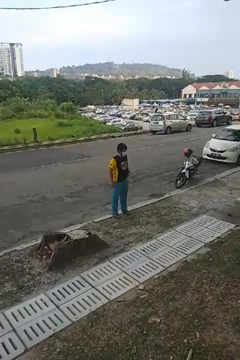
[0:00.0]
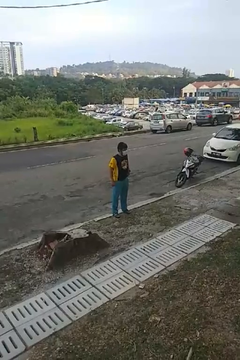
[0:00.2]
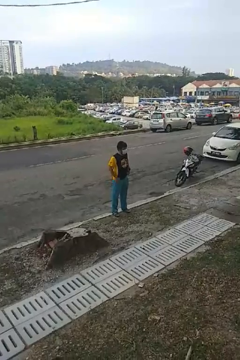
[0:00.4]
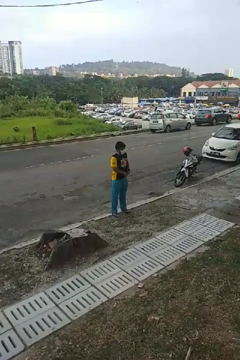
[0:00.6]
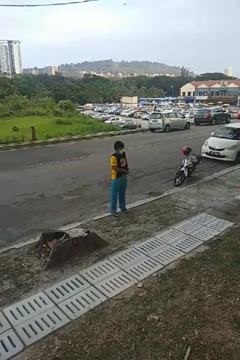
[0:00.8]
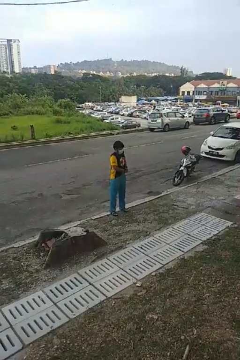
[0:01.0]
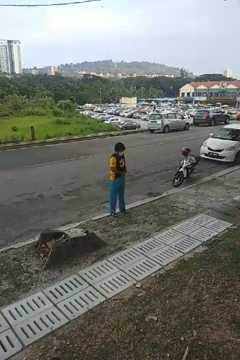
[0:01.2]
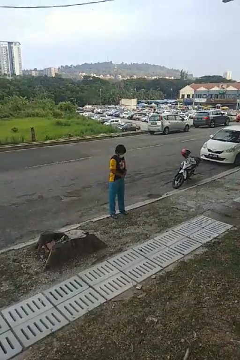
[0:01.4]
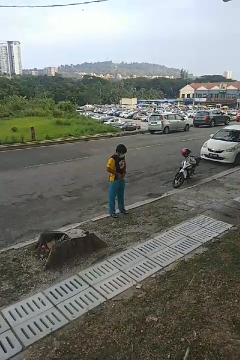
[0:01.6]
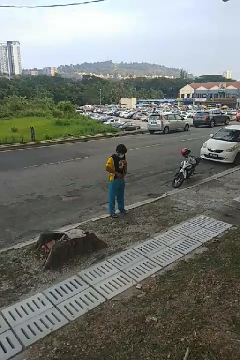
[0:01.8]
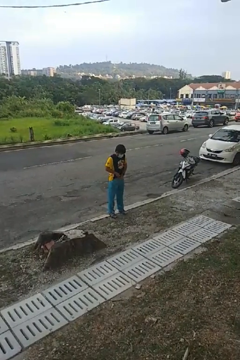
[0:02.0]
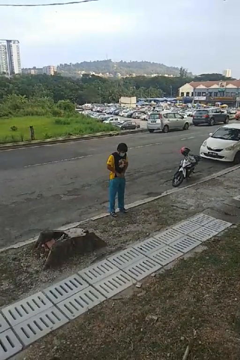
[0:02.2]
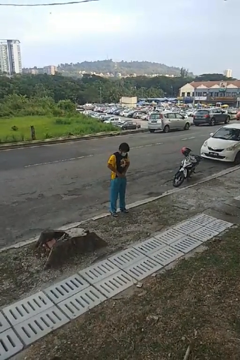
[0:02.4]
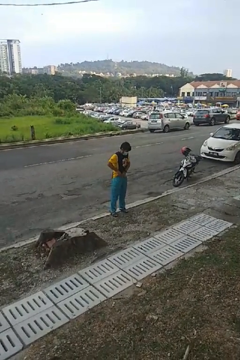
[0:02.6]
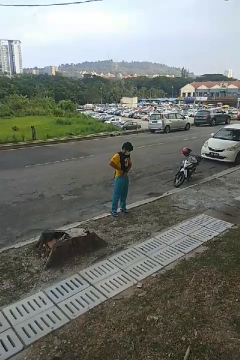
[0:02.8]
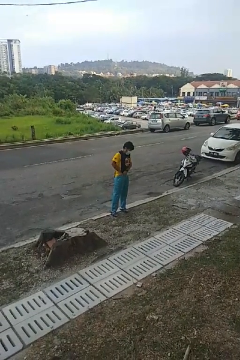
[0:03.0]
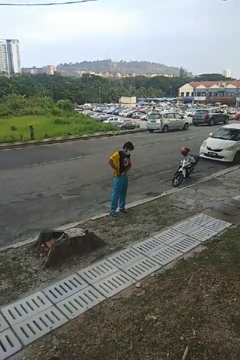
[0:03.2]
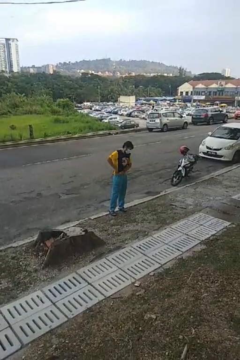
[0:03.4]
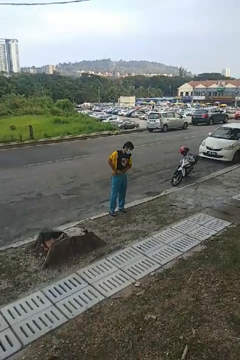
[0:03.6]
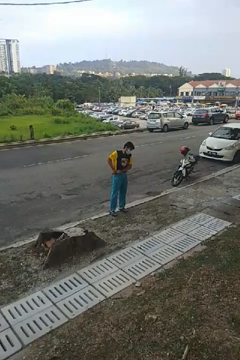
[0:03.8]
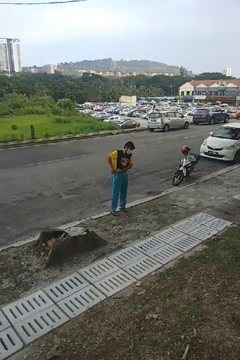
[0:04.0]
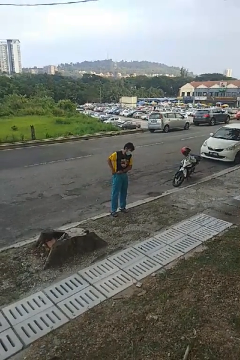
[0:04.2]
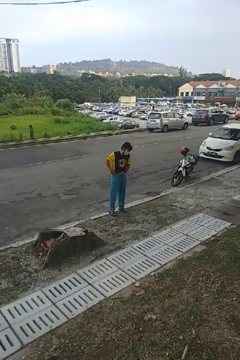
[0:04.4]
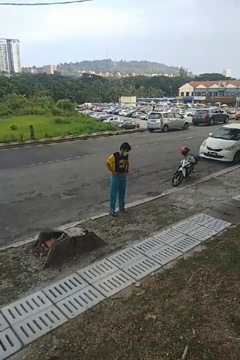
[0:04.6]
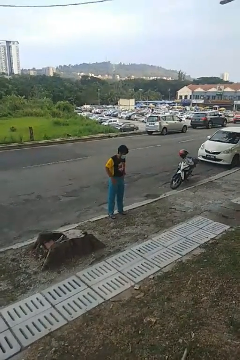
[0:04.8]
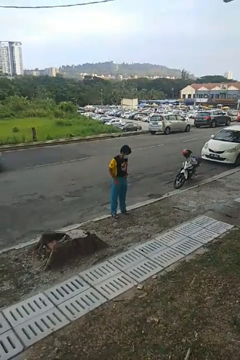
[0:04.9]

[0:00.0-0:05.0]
person tucks in shirt

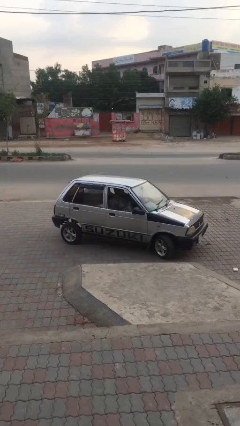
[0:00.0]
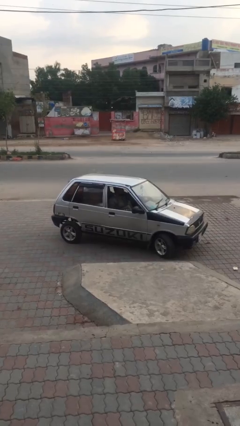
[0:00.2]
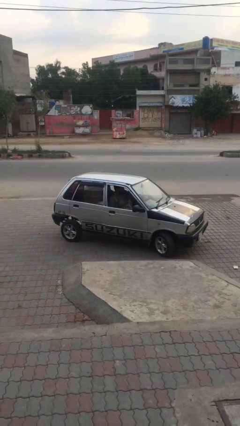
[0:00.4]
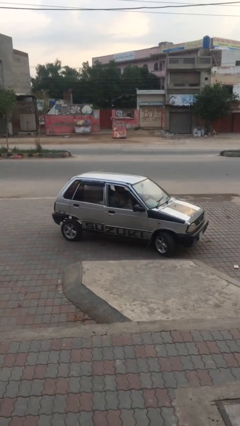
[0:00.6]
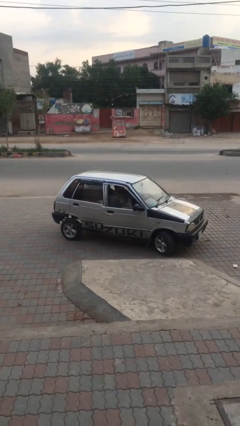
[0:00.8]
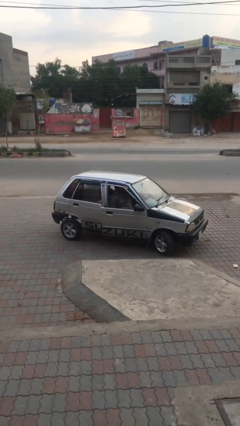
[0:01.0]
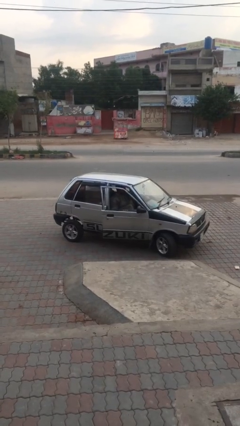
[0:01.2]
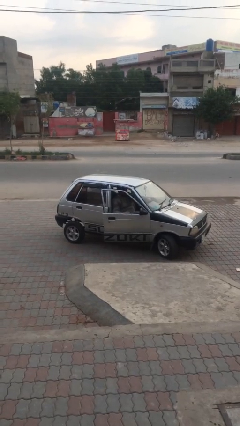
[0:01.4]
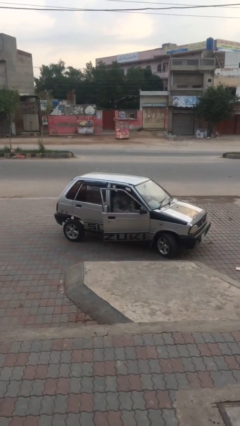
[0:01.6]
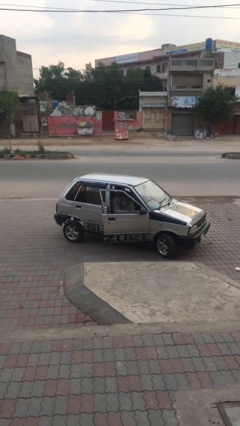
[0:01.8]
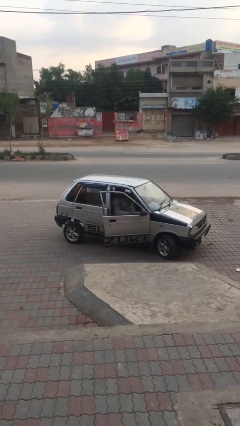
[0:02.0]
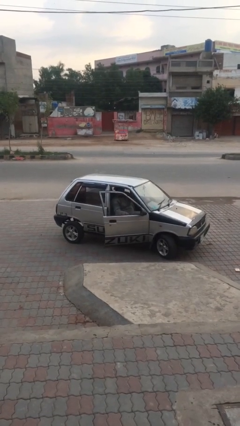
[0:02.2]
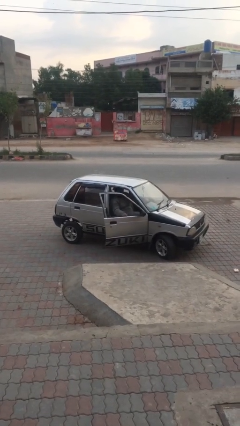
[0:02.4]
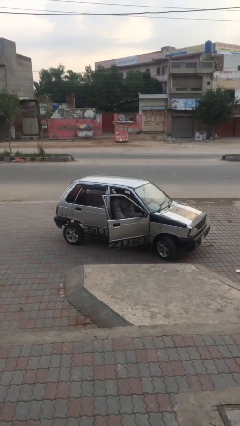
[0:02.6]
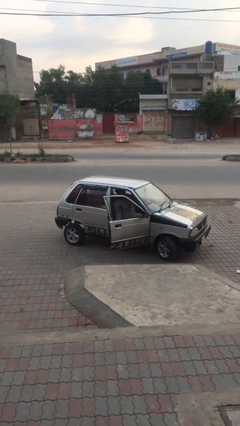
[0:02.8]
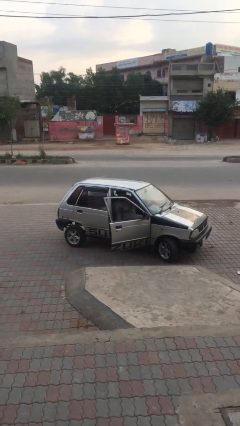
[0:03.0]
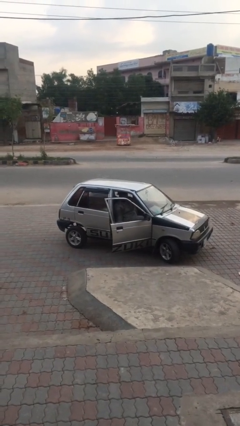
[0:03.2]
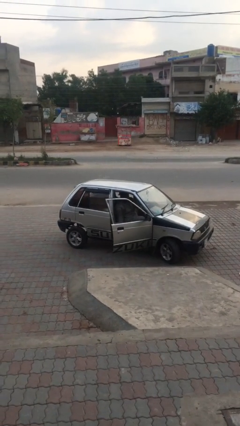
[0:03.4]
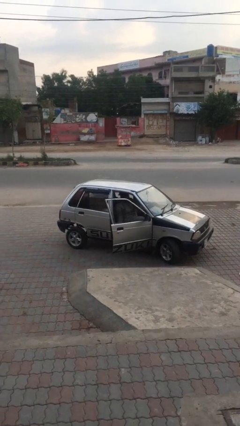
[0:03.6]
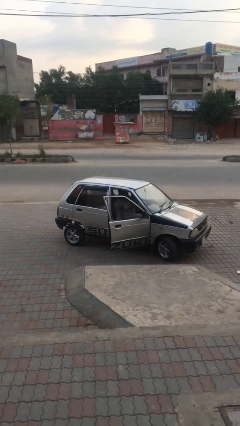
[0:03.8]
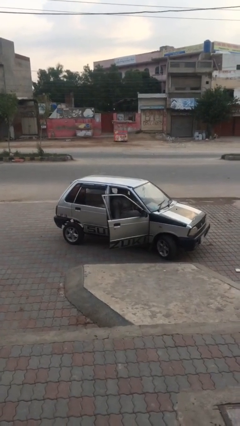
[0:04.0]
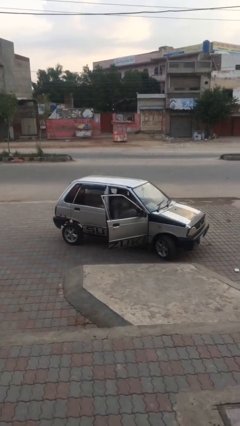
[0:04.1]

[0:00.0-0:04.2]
person opens car door

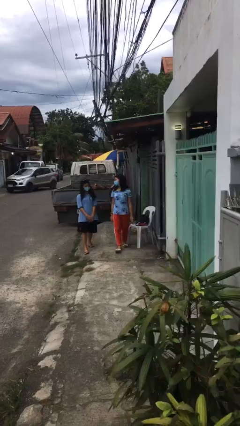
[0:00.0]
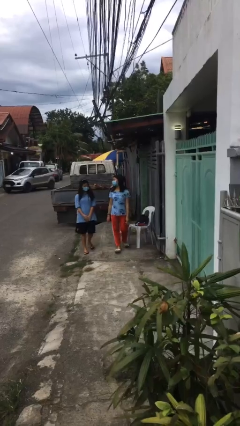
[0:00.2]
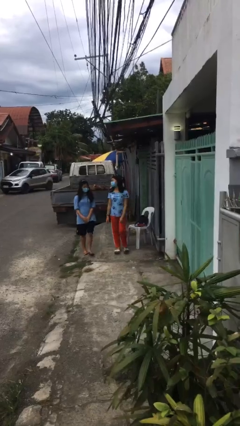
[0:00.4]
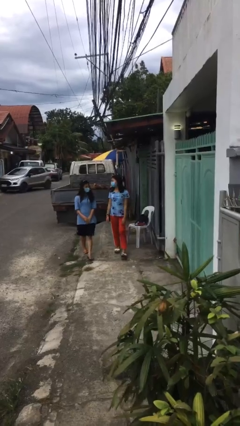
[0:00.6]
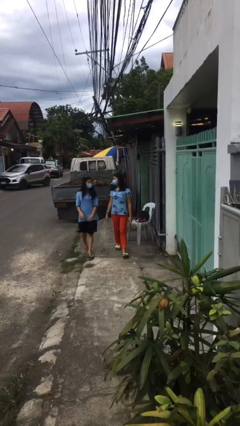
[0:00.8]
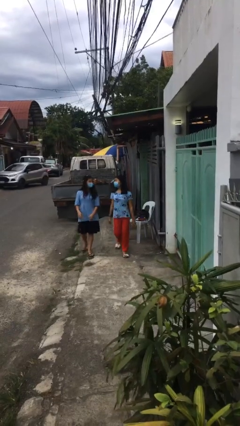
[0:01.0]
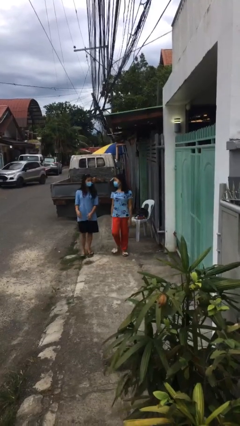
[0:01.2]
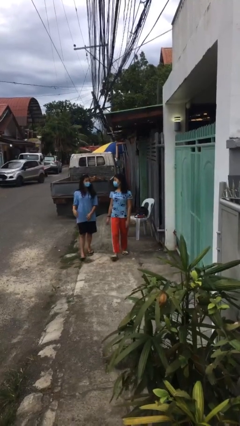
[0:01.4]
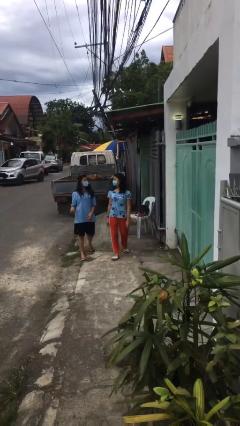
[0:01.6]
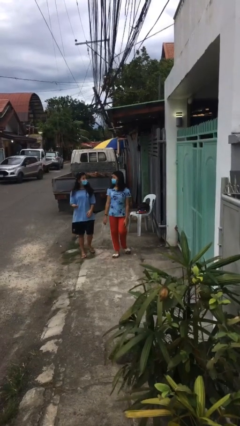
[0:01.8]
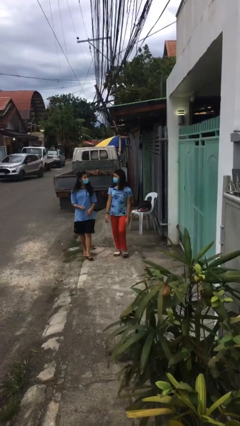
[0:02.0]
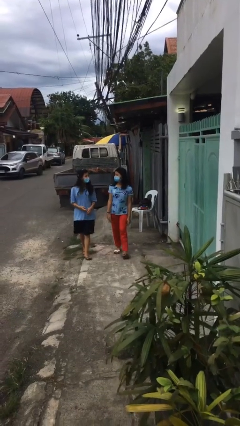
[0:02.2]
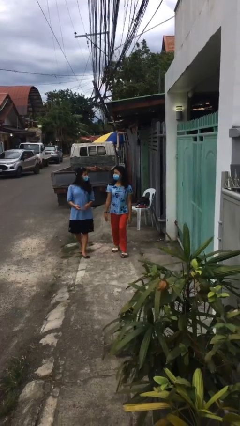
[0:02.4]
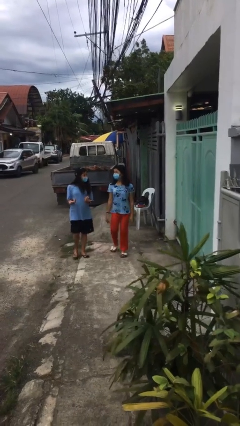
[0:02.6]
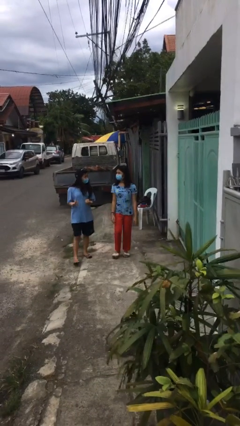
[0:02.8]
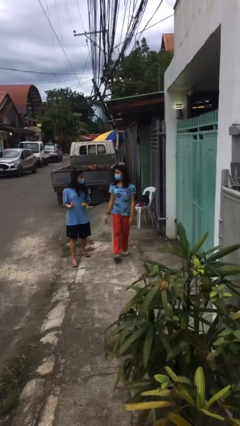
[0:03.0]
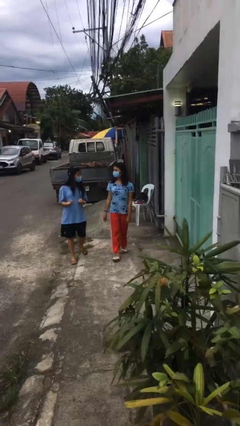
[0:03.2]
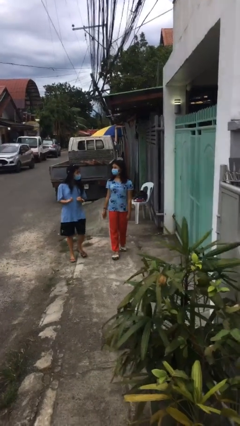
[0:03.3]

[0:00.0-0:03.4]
person talks to person

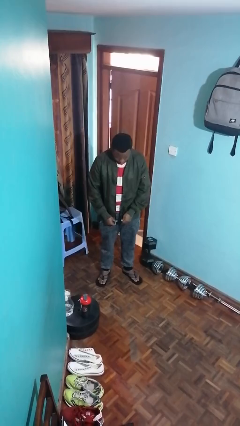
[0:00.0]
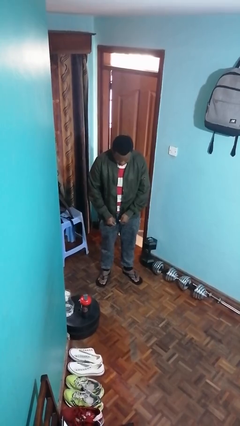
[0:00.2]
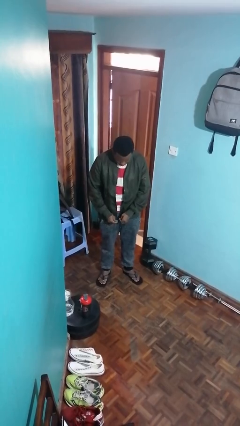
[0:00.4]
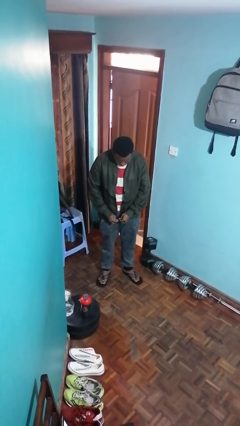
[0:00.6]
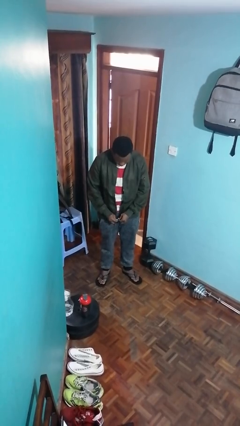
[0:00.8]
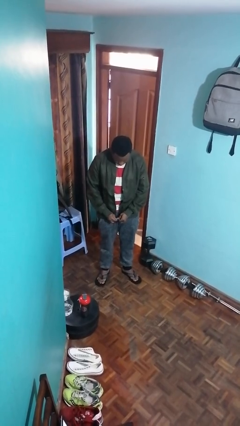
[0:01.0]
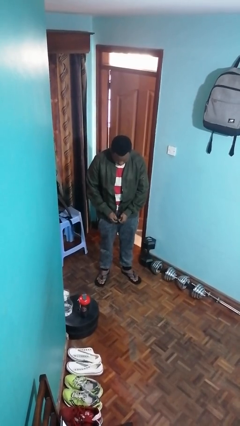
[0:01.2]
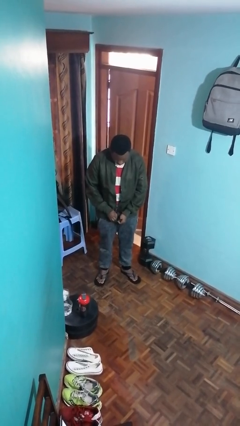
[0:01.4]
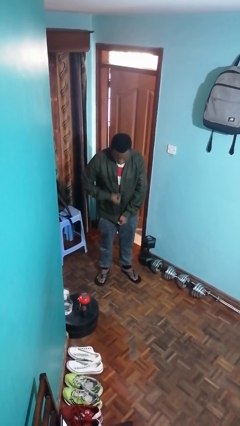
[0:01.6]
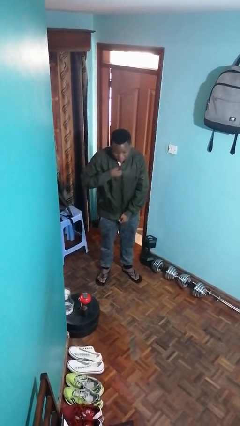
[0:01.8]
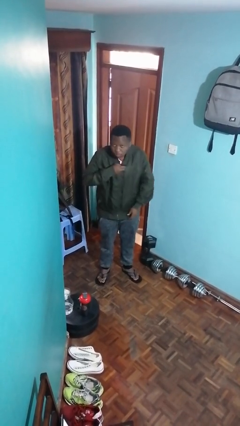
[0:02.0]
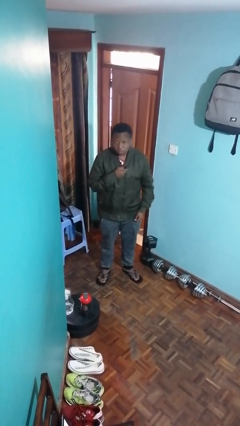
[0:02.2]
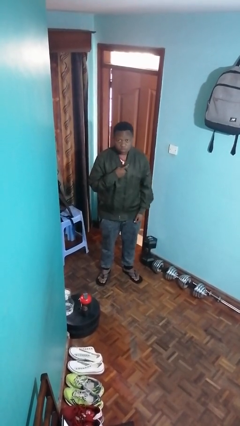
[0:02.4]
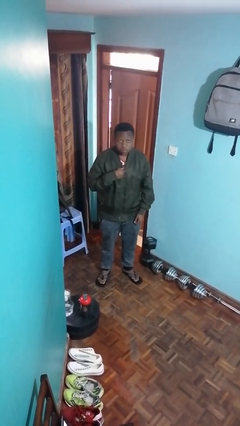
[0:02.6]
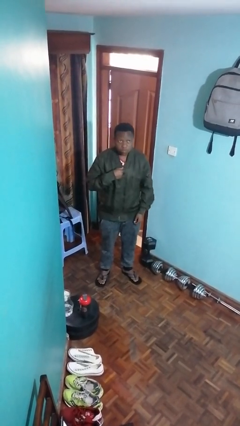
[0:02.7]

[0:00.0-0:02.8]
person zips up jacket

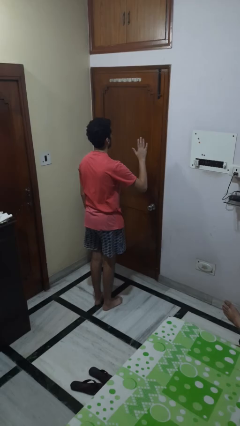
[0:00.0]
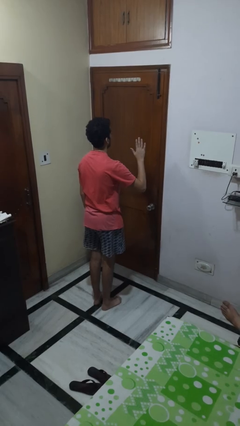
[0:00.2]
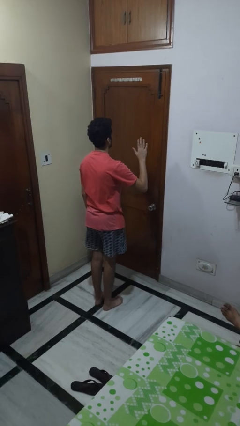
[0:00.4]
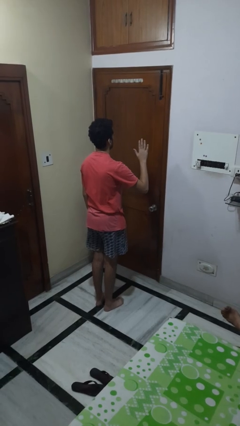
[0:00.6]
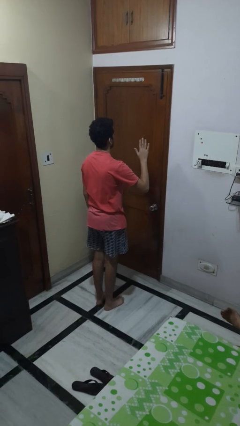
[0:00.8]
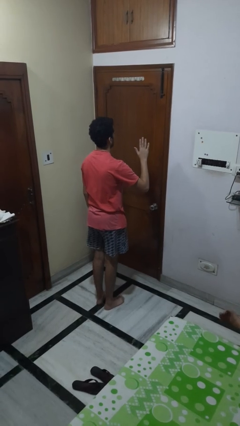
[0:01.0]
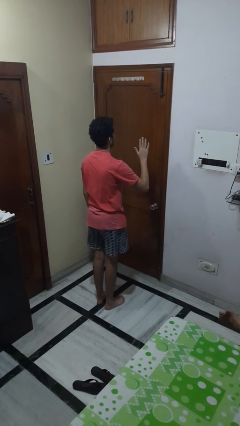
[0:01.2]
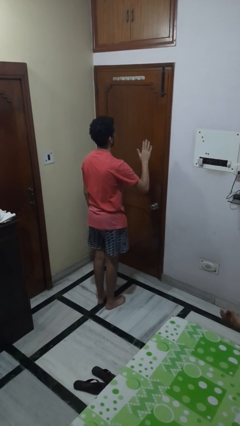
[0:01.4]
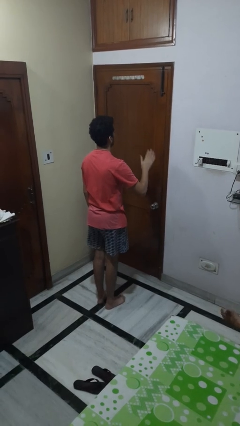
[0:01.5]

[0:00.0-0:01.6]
person gestures stop

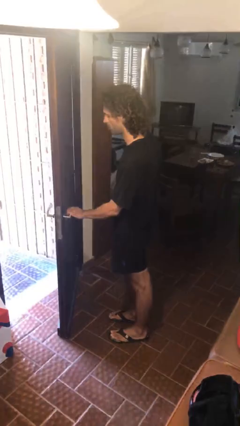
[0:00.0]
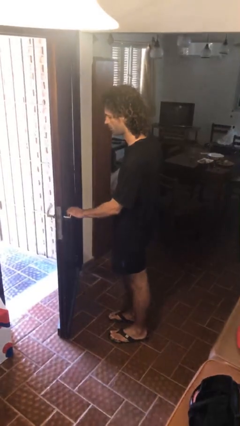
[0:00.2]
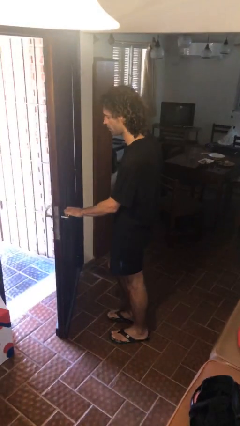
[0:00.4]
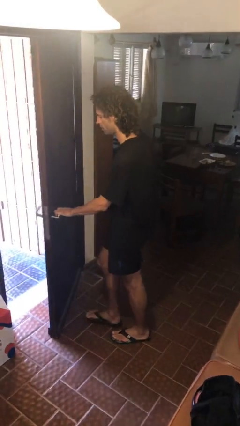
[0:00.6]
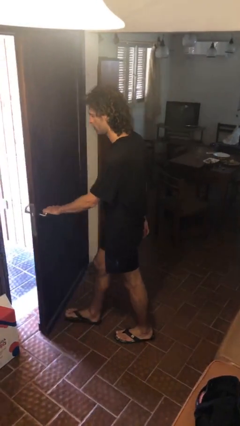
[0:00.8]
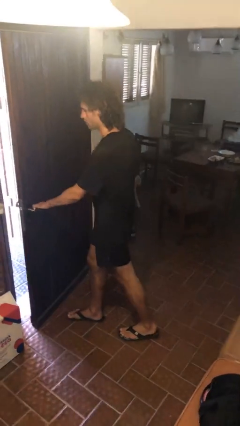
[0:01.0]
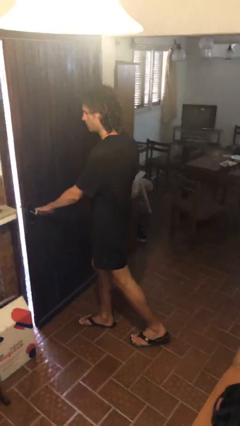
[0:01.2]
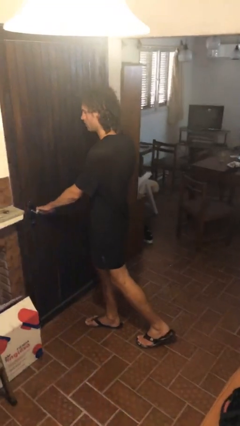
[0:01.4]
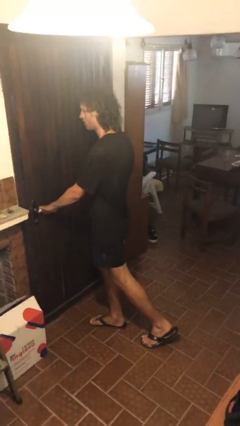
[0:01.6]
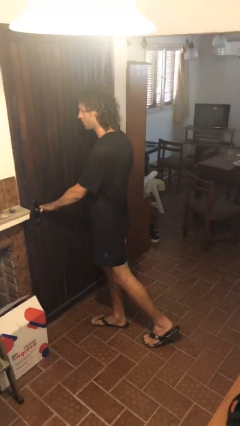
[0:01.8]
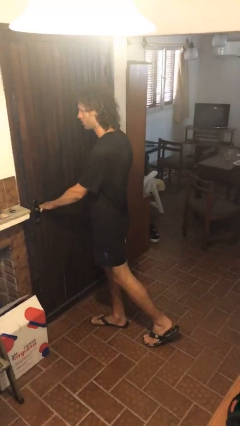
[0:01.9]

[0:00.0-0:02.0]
person closes facility door
